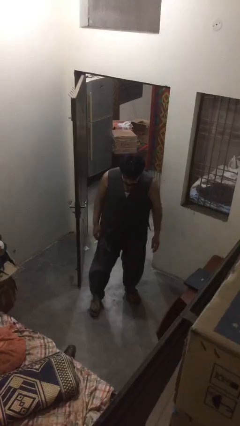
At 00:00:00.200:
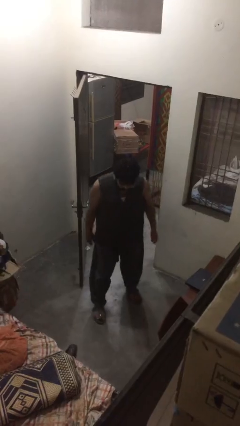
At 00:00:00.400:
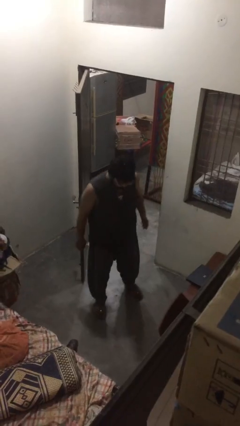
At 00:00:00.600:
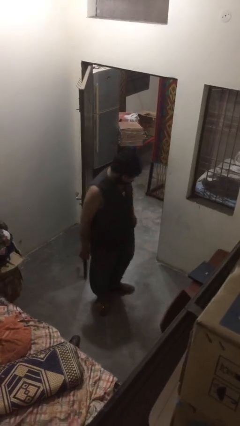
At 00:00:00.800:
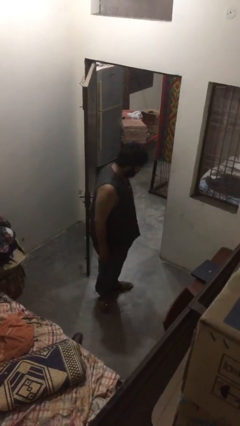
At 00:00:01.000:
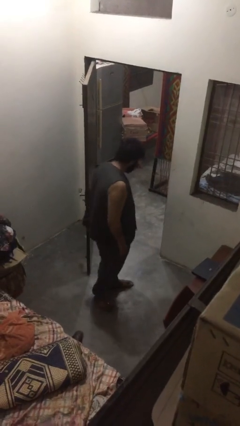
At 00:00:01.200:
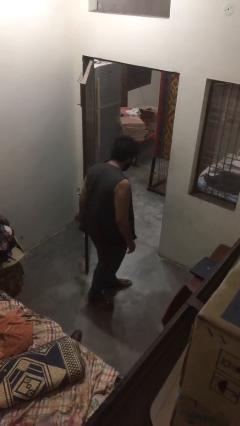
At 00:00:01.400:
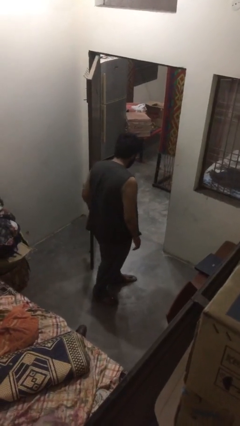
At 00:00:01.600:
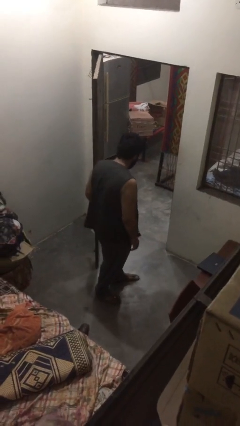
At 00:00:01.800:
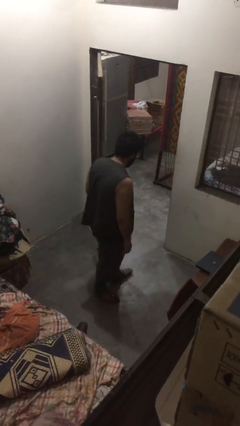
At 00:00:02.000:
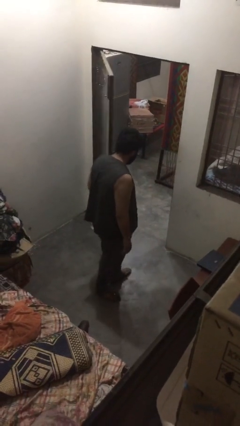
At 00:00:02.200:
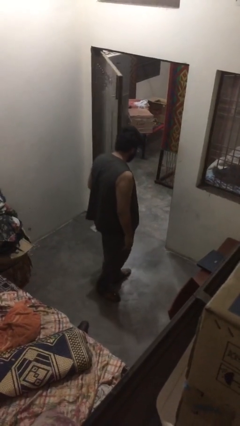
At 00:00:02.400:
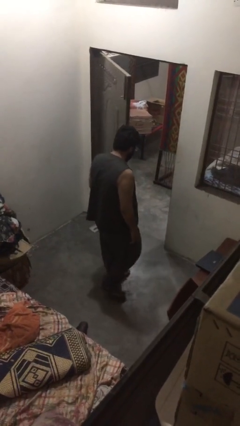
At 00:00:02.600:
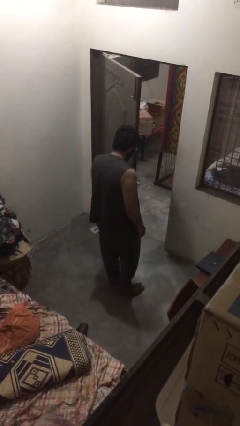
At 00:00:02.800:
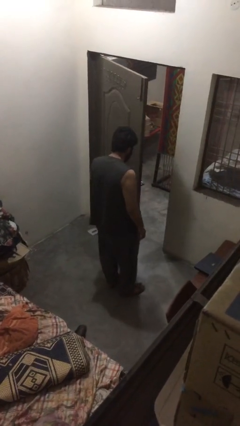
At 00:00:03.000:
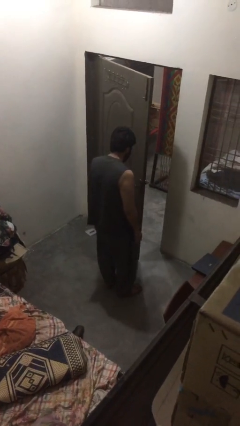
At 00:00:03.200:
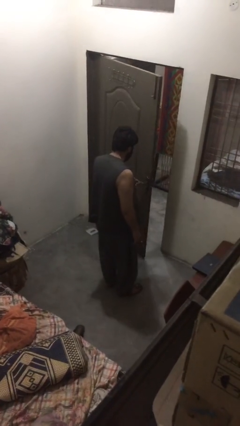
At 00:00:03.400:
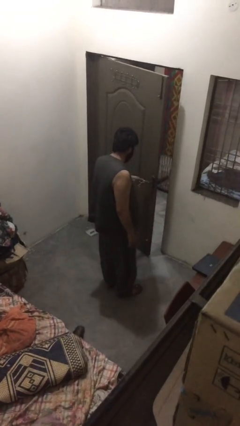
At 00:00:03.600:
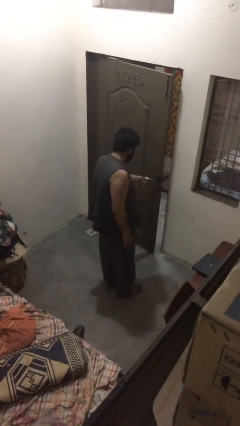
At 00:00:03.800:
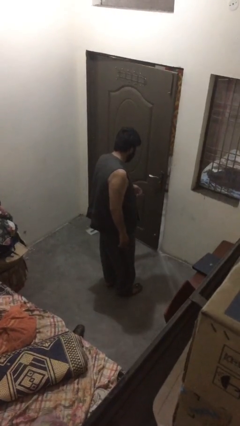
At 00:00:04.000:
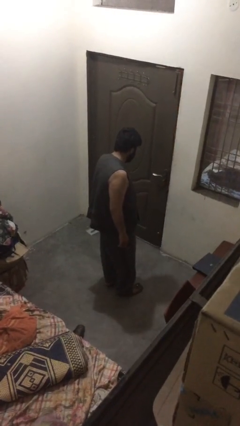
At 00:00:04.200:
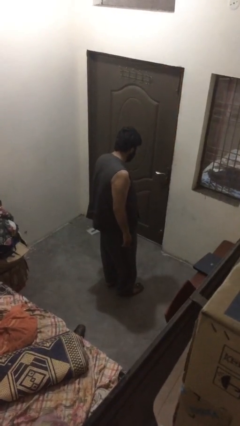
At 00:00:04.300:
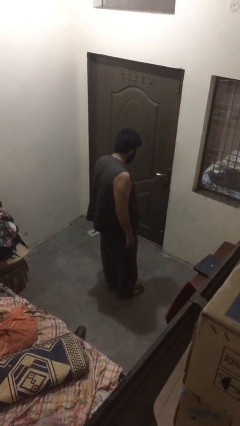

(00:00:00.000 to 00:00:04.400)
person closes facility door

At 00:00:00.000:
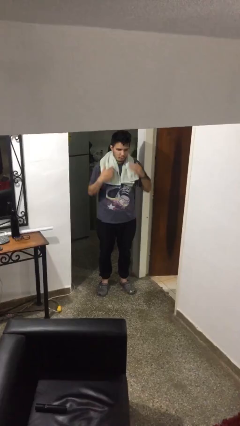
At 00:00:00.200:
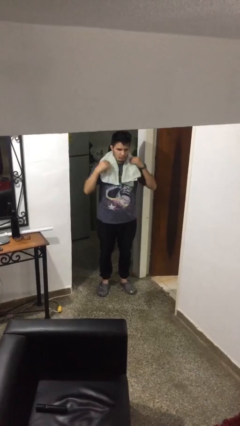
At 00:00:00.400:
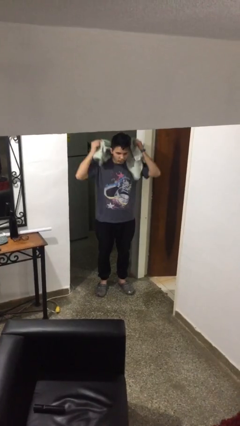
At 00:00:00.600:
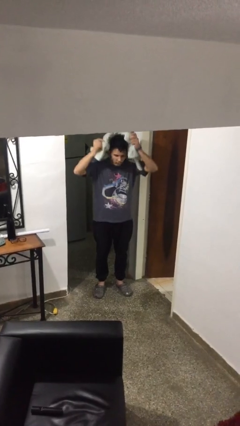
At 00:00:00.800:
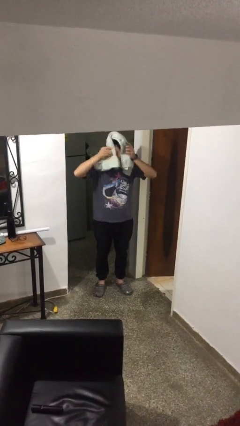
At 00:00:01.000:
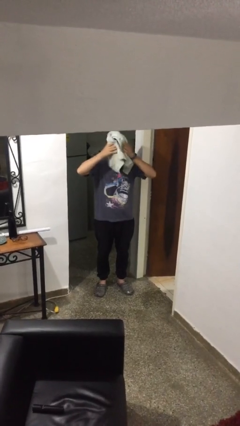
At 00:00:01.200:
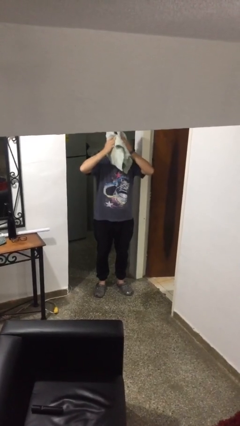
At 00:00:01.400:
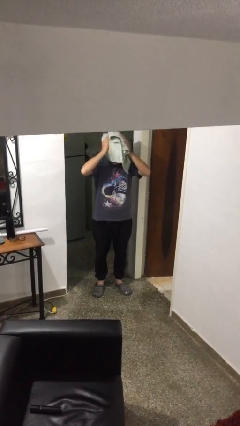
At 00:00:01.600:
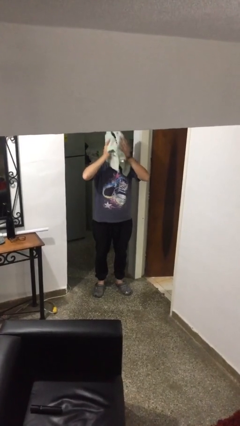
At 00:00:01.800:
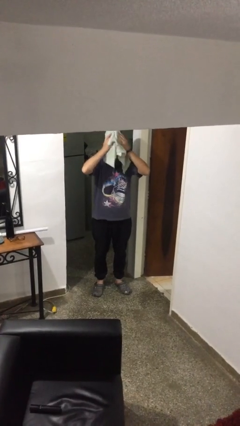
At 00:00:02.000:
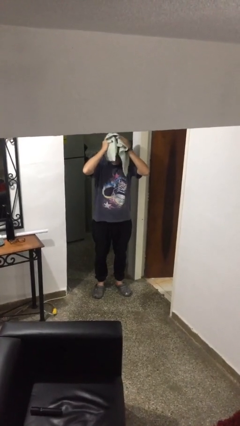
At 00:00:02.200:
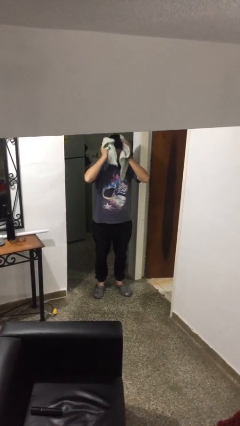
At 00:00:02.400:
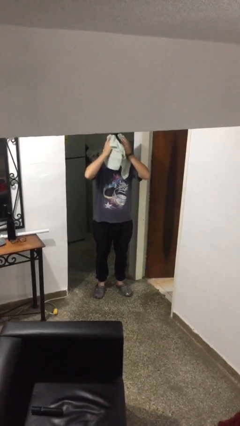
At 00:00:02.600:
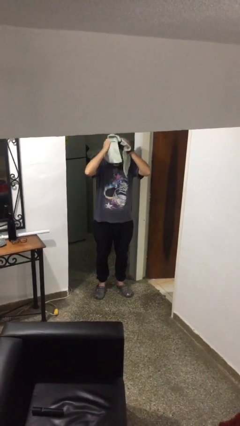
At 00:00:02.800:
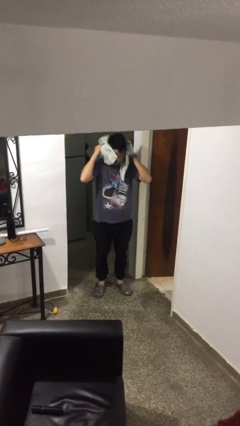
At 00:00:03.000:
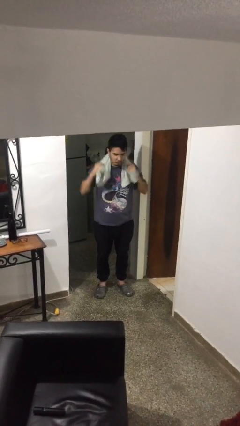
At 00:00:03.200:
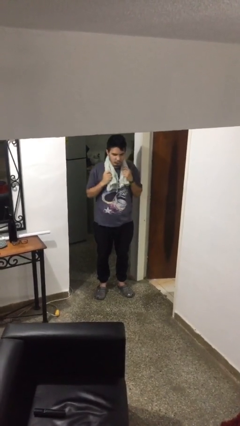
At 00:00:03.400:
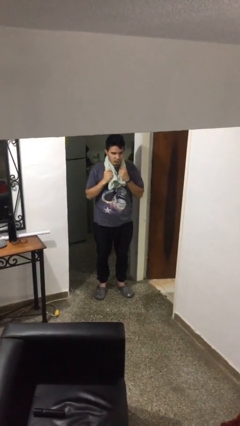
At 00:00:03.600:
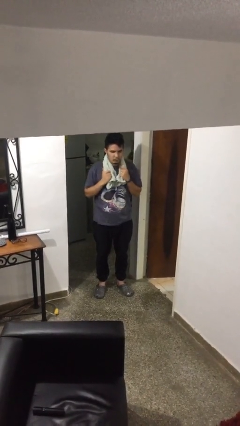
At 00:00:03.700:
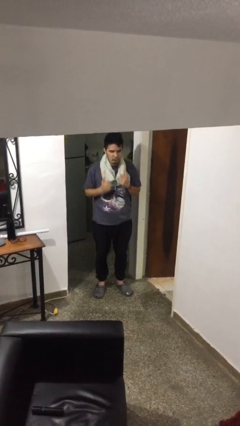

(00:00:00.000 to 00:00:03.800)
person dries hair with towel

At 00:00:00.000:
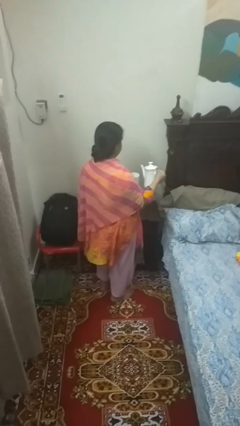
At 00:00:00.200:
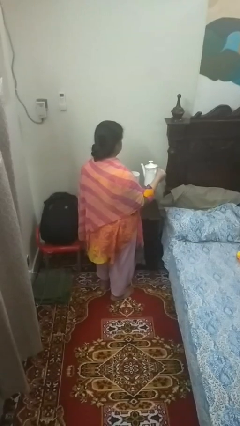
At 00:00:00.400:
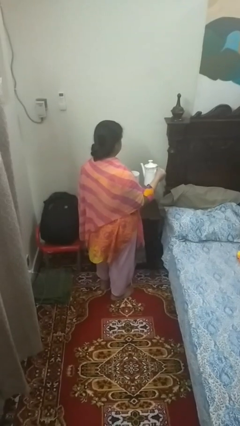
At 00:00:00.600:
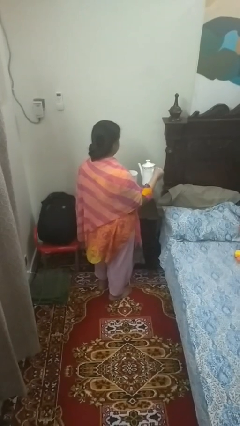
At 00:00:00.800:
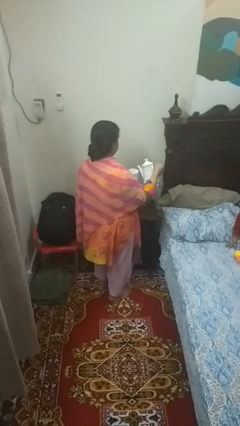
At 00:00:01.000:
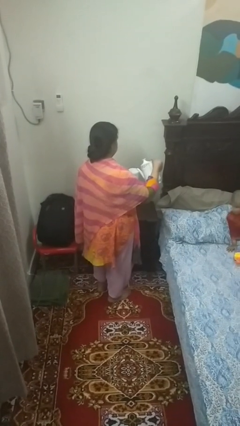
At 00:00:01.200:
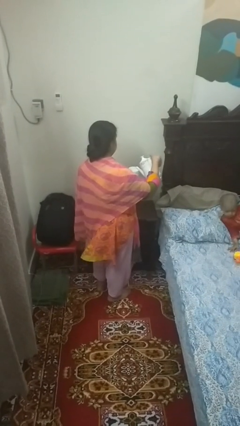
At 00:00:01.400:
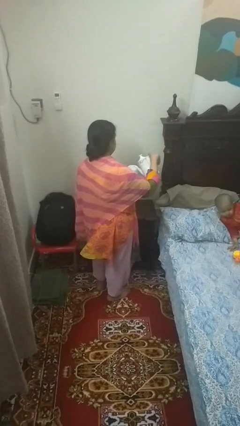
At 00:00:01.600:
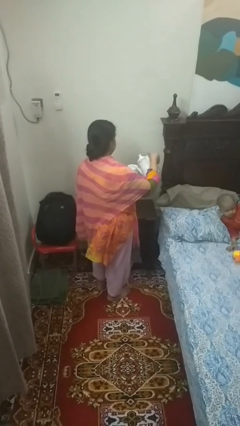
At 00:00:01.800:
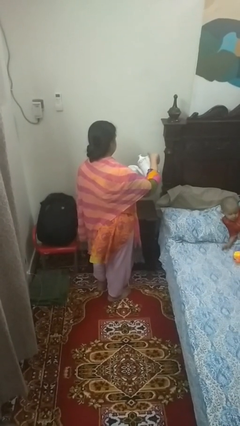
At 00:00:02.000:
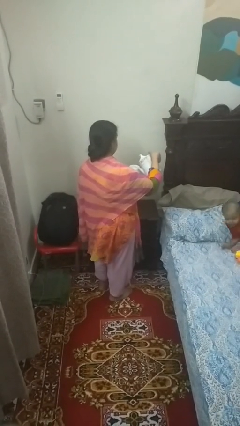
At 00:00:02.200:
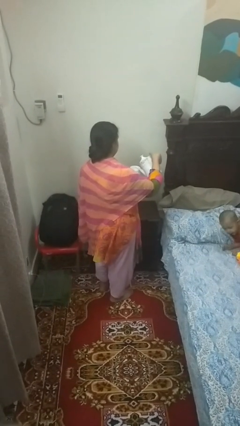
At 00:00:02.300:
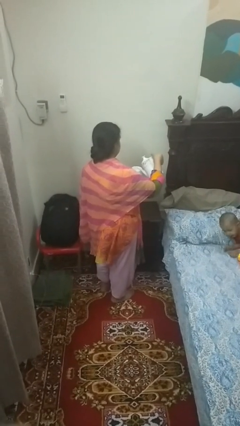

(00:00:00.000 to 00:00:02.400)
person pours coffee into mug

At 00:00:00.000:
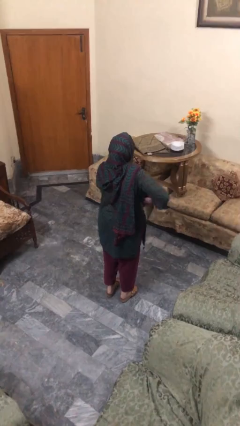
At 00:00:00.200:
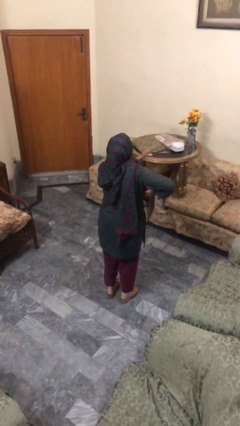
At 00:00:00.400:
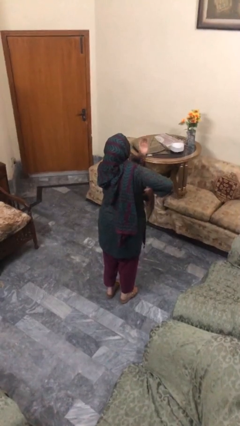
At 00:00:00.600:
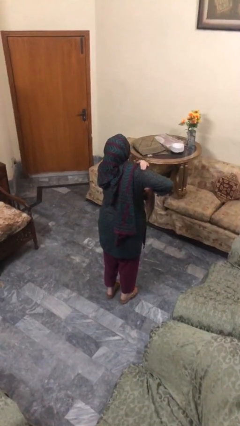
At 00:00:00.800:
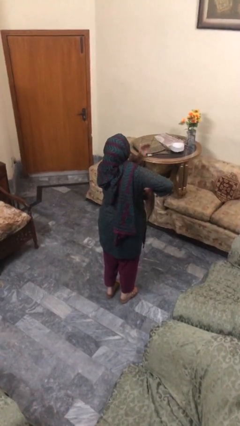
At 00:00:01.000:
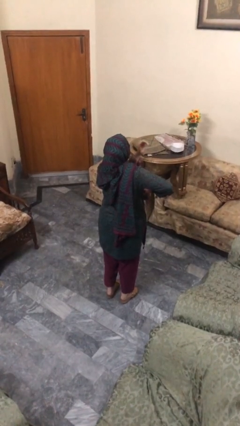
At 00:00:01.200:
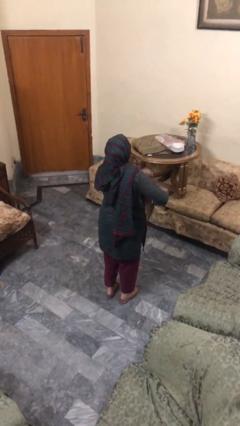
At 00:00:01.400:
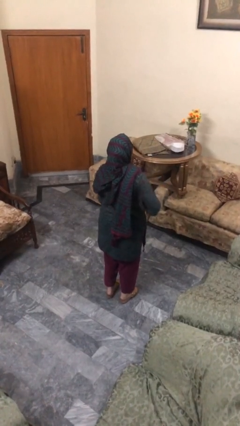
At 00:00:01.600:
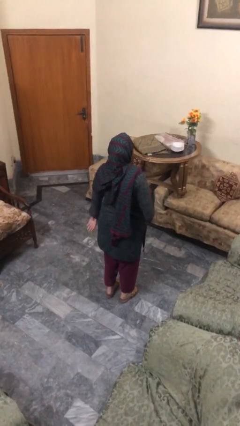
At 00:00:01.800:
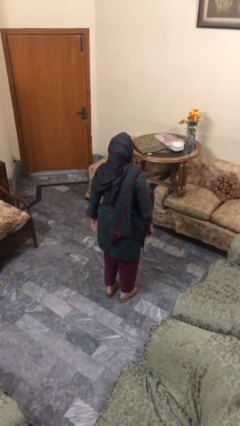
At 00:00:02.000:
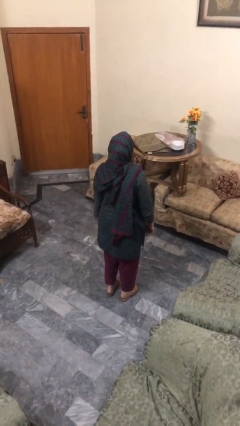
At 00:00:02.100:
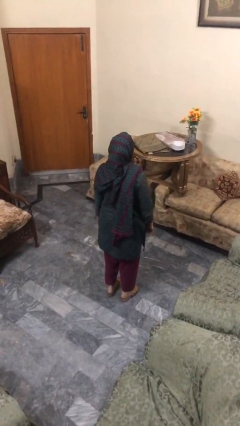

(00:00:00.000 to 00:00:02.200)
person swats bug

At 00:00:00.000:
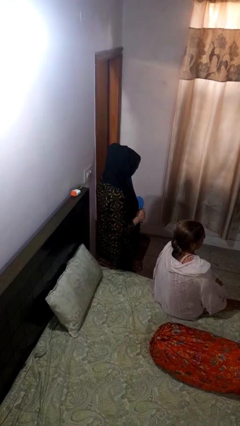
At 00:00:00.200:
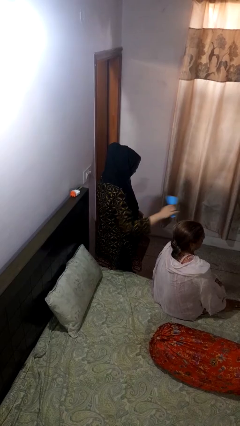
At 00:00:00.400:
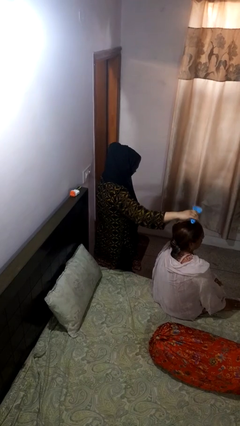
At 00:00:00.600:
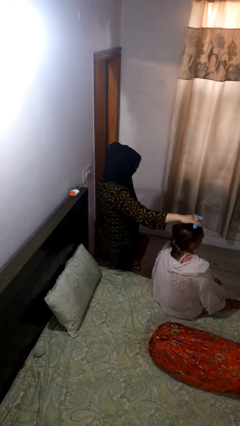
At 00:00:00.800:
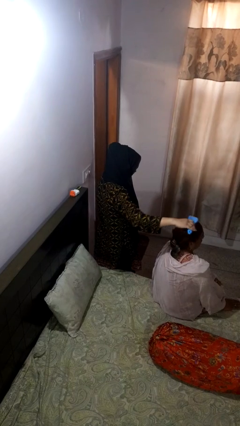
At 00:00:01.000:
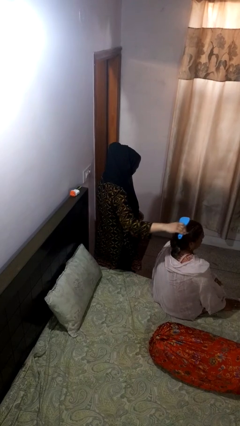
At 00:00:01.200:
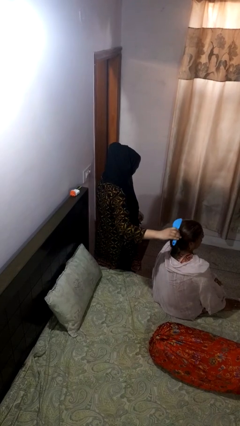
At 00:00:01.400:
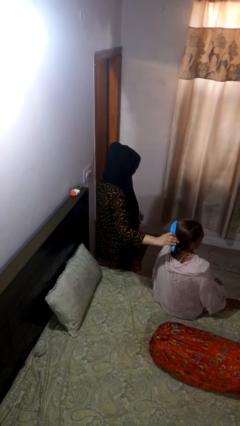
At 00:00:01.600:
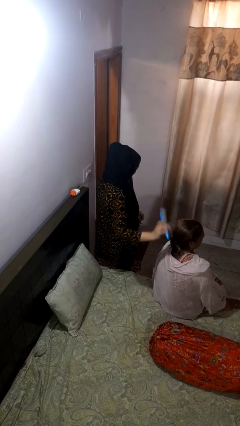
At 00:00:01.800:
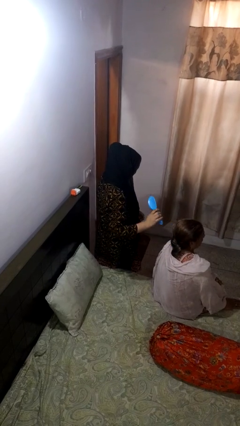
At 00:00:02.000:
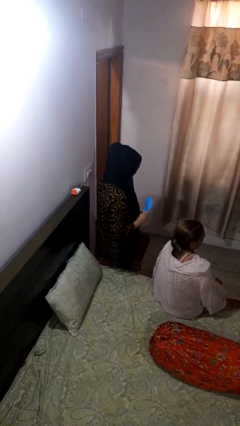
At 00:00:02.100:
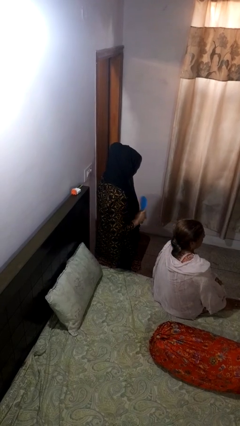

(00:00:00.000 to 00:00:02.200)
person brushes hair of person

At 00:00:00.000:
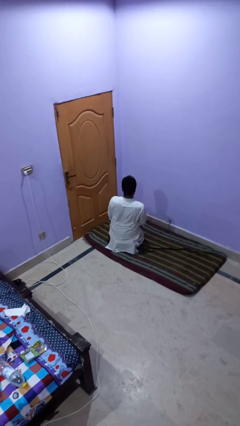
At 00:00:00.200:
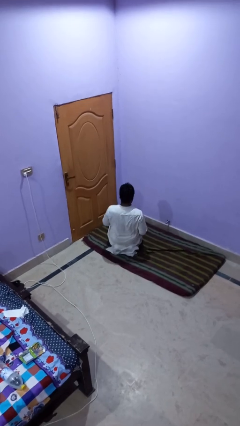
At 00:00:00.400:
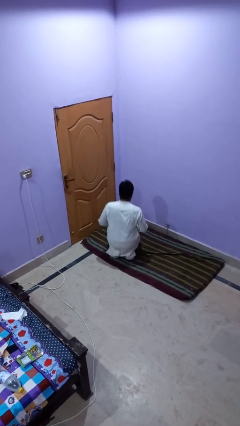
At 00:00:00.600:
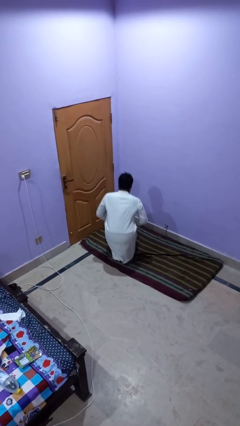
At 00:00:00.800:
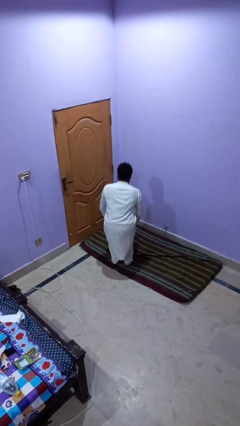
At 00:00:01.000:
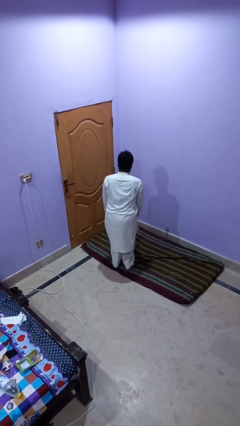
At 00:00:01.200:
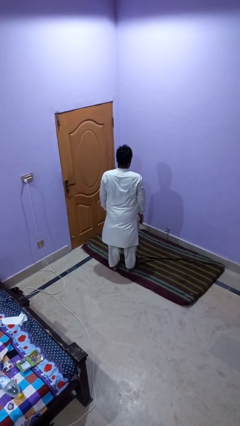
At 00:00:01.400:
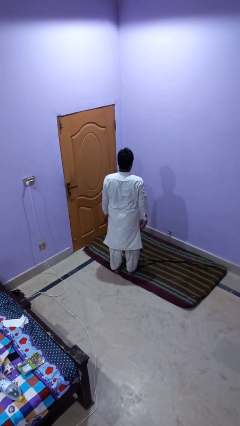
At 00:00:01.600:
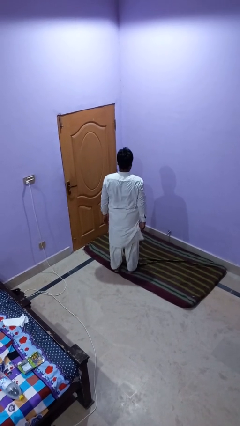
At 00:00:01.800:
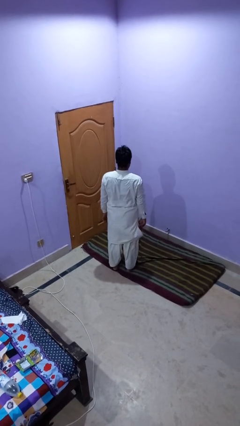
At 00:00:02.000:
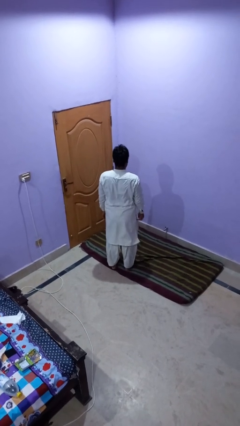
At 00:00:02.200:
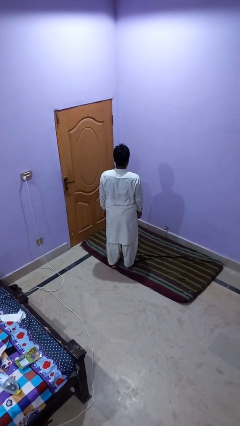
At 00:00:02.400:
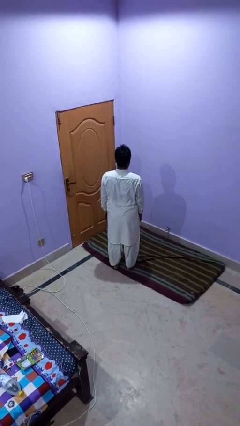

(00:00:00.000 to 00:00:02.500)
person stands up from floor
